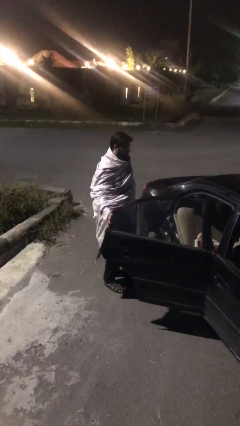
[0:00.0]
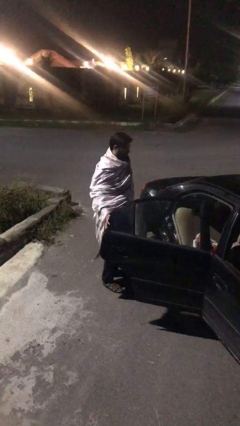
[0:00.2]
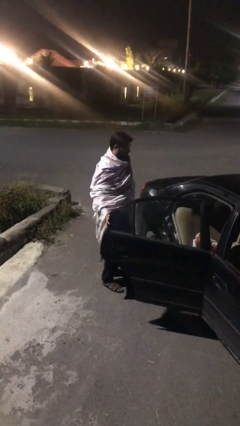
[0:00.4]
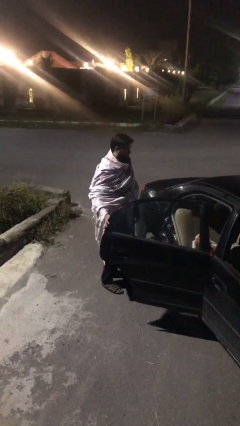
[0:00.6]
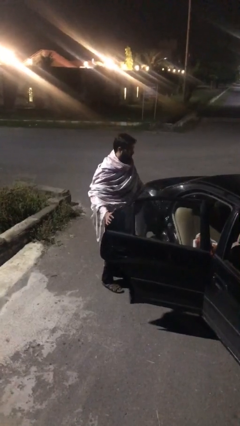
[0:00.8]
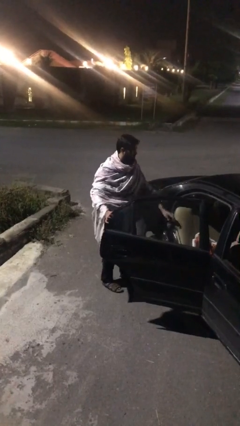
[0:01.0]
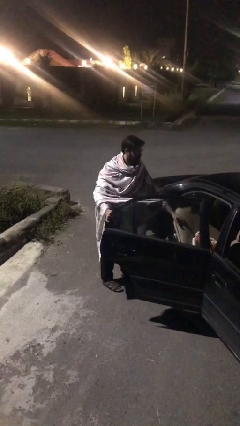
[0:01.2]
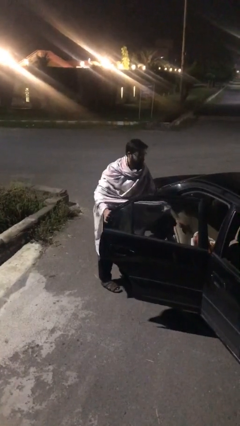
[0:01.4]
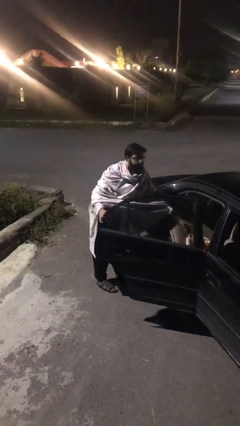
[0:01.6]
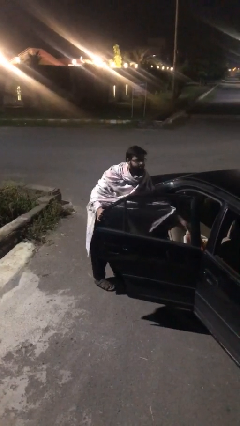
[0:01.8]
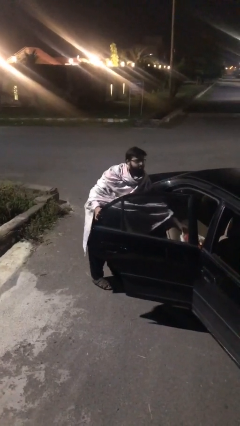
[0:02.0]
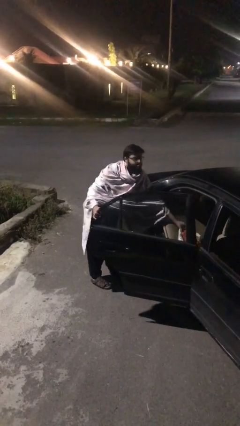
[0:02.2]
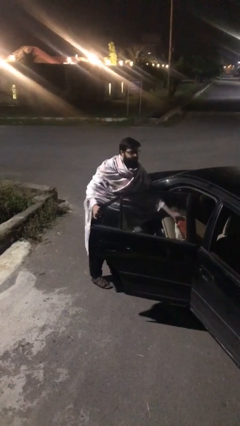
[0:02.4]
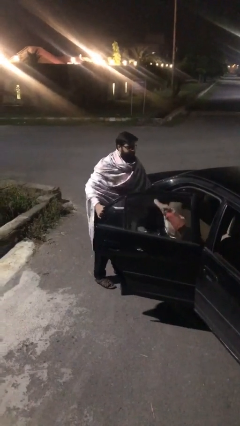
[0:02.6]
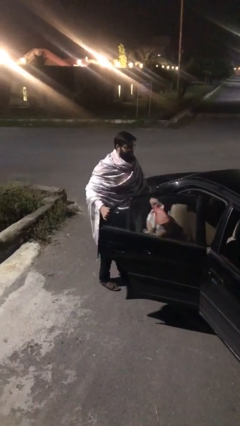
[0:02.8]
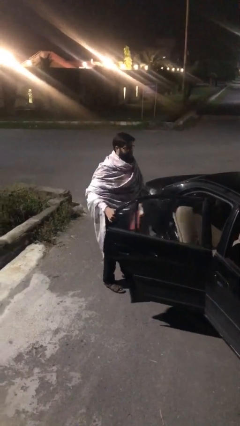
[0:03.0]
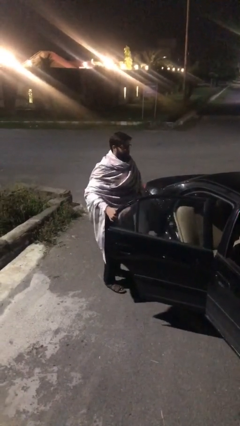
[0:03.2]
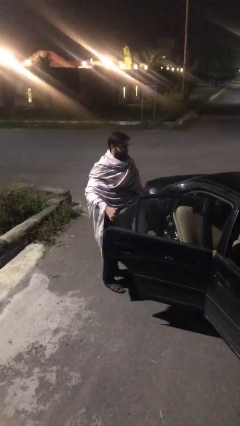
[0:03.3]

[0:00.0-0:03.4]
person unloads car

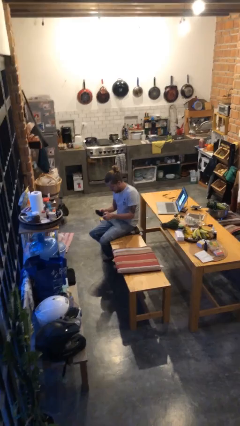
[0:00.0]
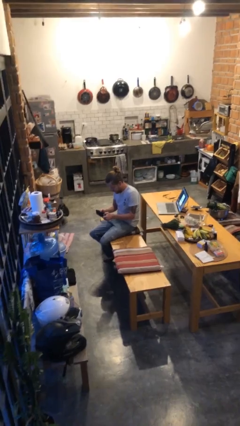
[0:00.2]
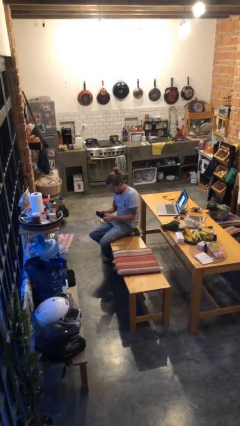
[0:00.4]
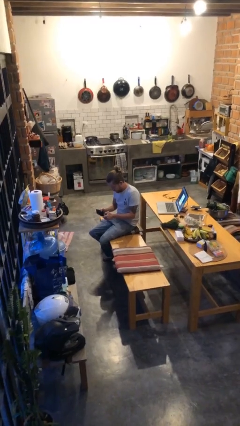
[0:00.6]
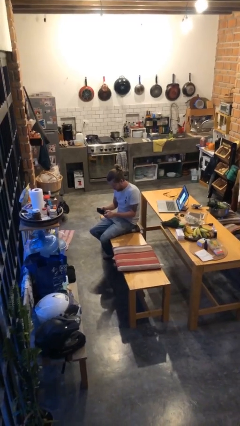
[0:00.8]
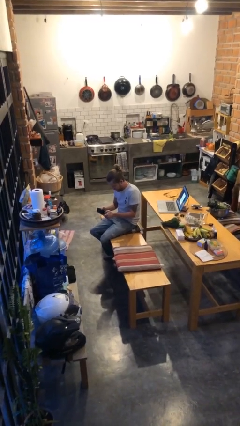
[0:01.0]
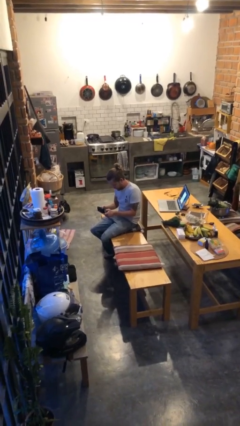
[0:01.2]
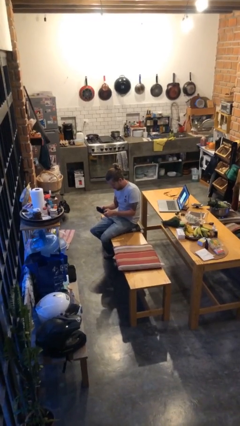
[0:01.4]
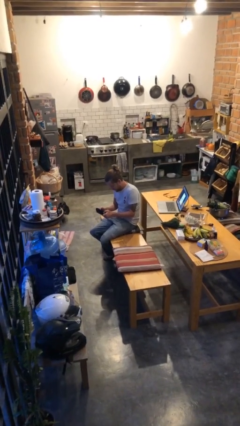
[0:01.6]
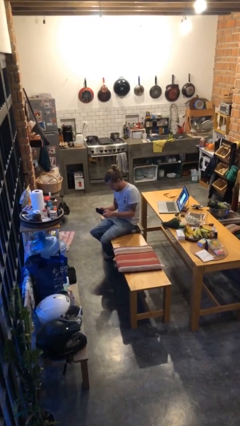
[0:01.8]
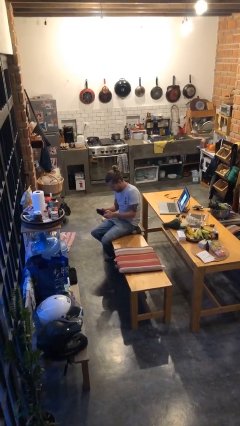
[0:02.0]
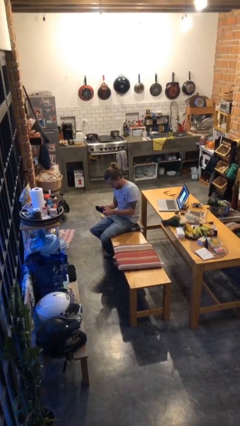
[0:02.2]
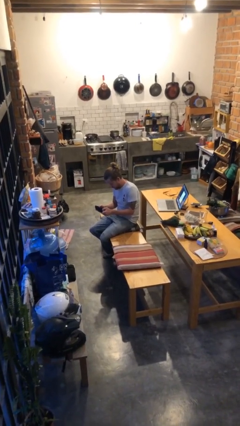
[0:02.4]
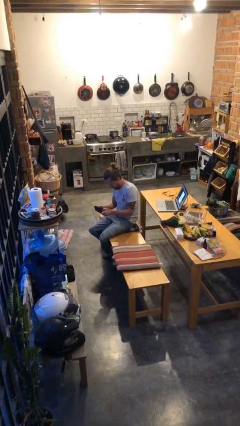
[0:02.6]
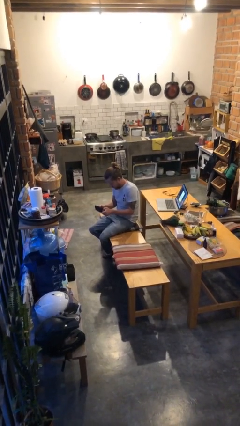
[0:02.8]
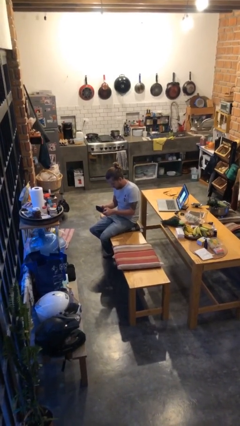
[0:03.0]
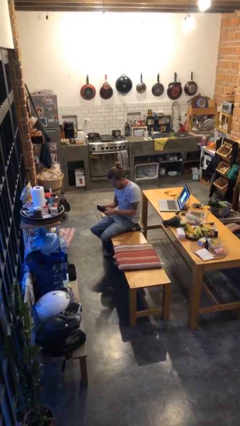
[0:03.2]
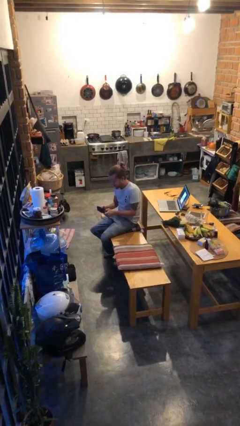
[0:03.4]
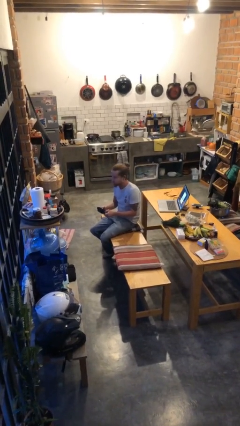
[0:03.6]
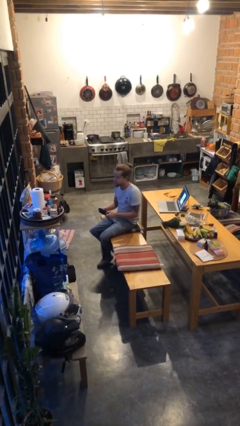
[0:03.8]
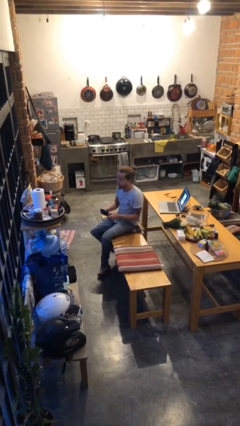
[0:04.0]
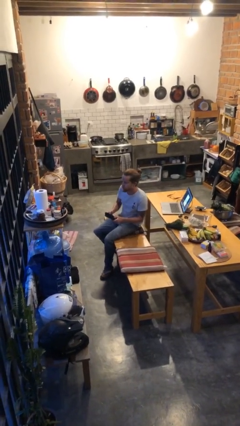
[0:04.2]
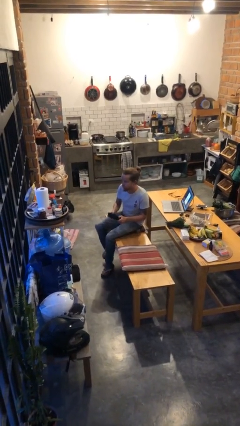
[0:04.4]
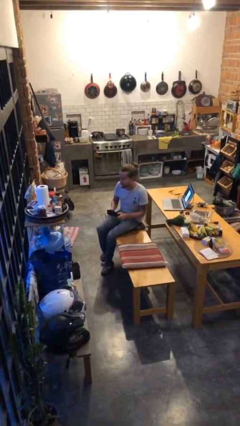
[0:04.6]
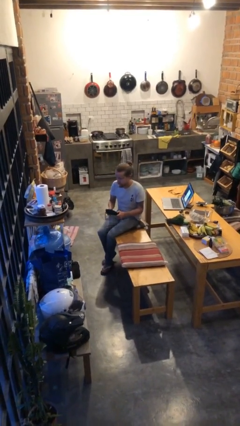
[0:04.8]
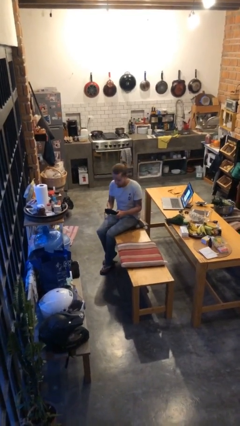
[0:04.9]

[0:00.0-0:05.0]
person interacts with handheld game

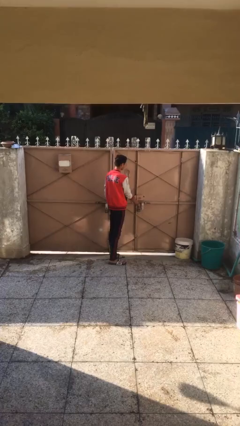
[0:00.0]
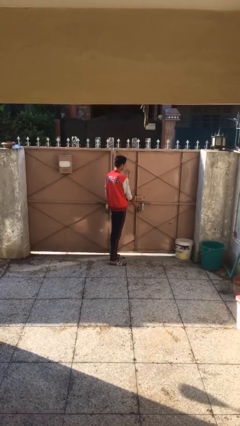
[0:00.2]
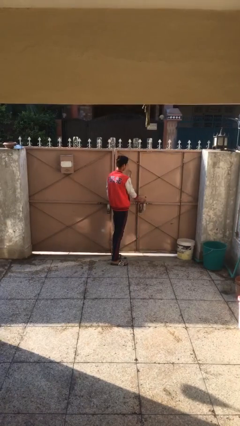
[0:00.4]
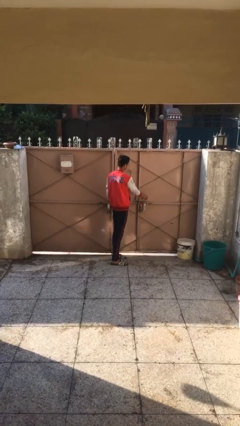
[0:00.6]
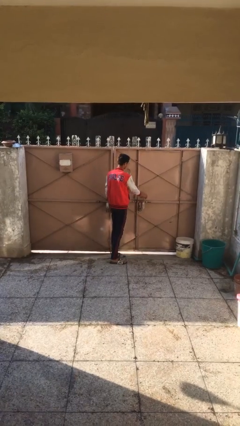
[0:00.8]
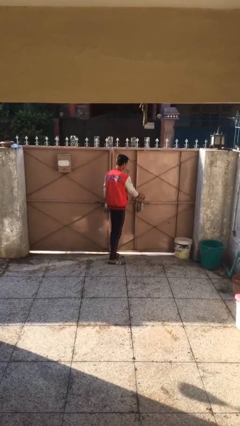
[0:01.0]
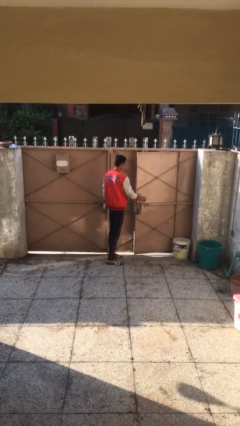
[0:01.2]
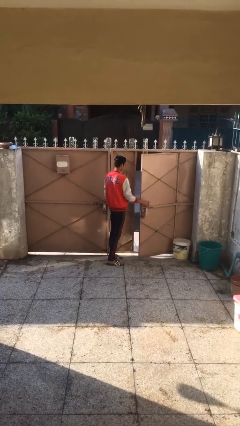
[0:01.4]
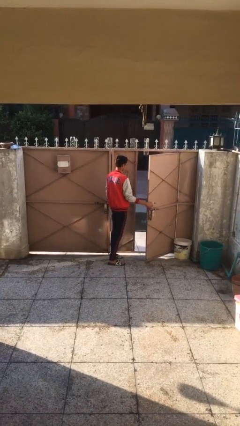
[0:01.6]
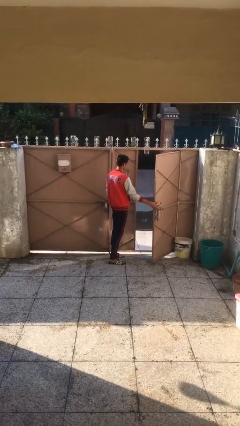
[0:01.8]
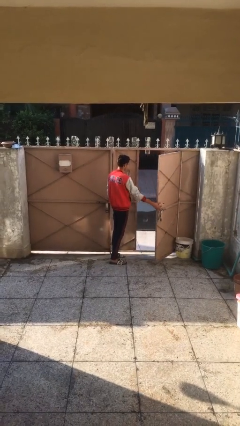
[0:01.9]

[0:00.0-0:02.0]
person opens facility door

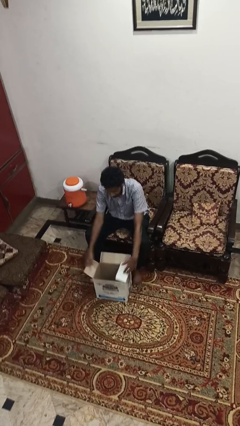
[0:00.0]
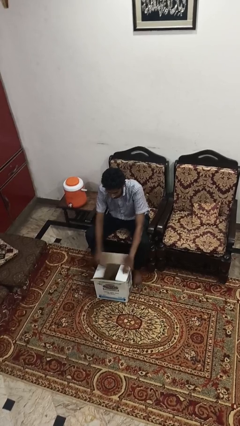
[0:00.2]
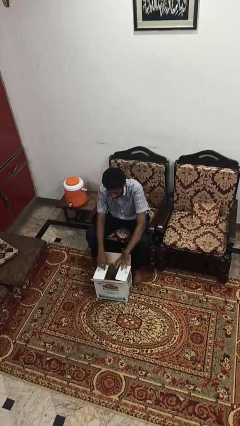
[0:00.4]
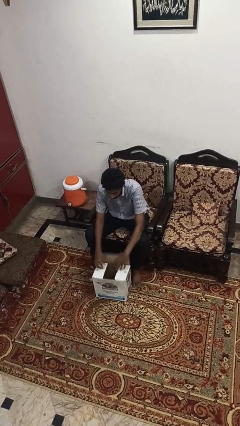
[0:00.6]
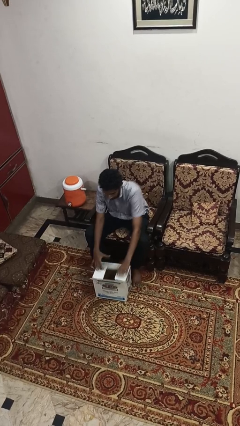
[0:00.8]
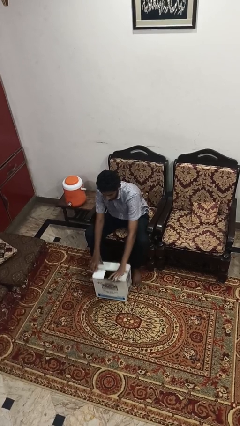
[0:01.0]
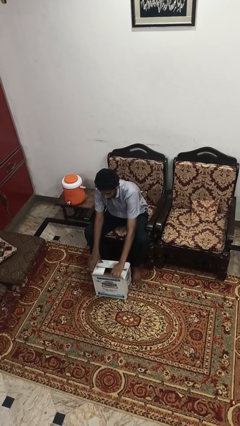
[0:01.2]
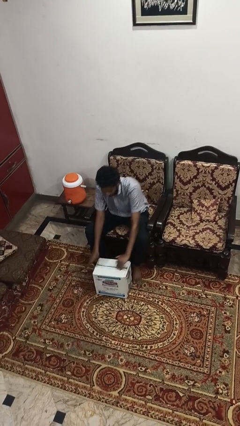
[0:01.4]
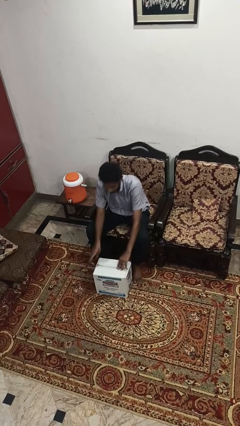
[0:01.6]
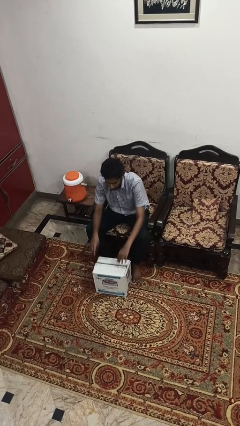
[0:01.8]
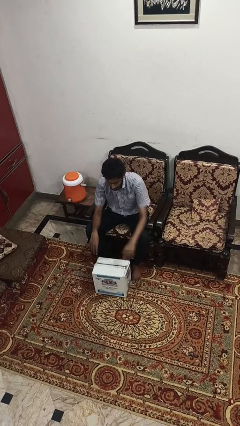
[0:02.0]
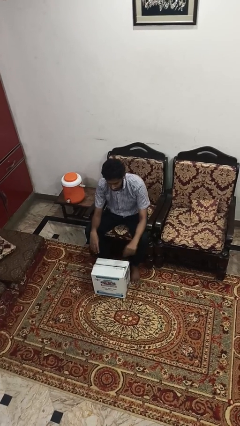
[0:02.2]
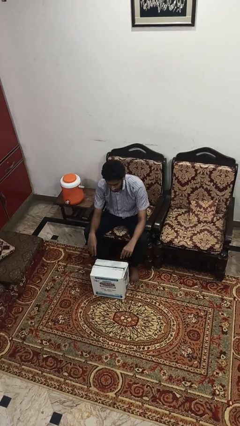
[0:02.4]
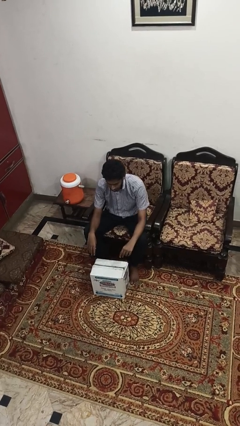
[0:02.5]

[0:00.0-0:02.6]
person closes box

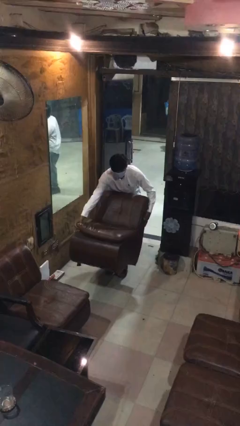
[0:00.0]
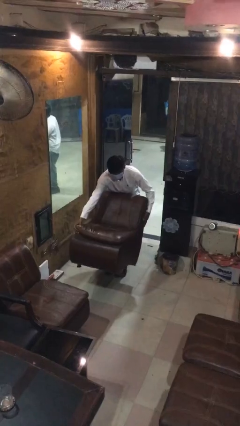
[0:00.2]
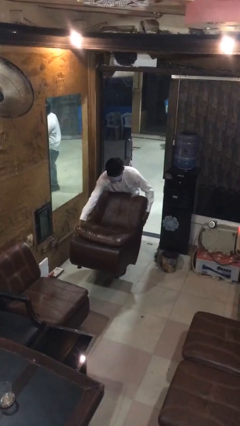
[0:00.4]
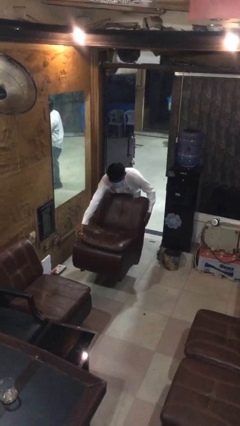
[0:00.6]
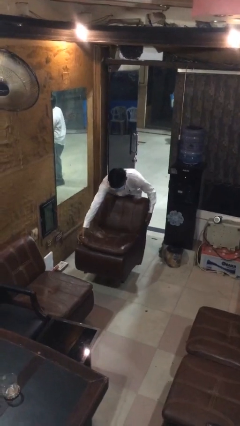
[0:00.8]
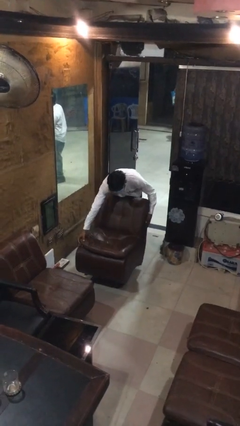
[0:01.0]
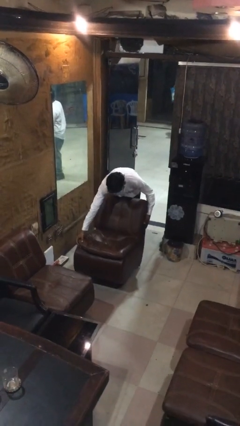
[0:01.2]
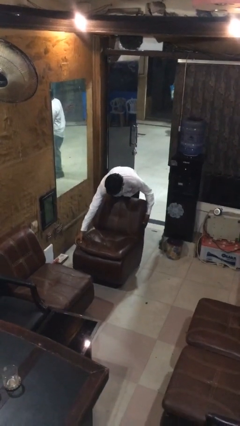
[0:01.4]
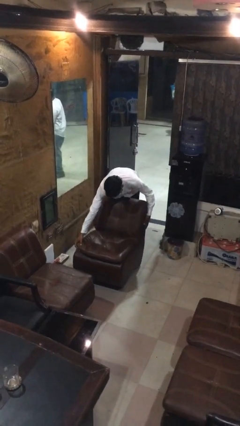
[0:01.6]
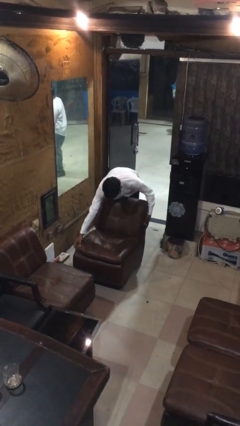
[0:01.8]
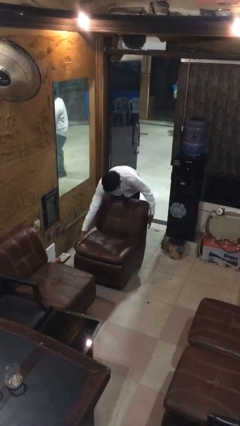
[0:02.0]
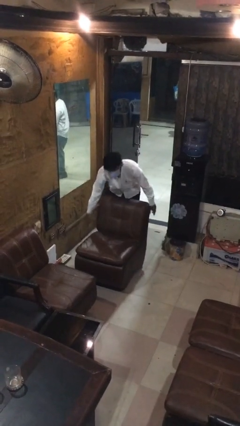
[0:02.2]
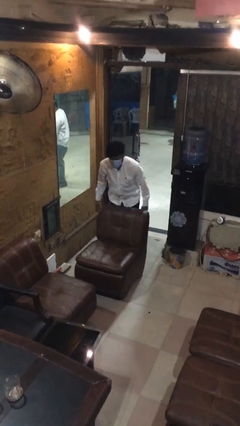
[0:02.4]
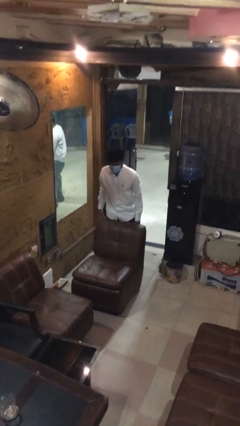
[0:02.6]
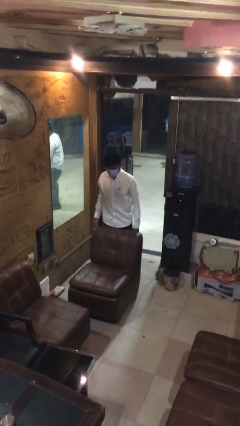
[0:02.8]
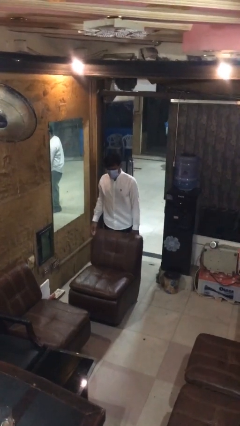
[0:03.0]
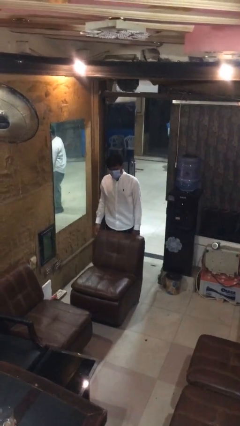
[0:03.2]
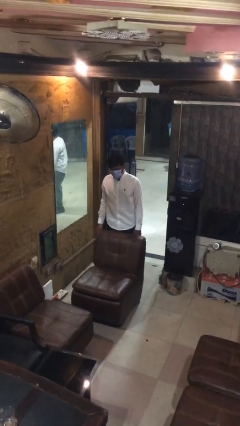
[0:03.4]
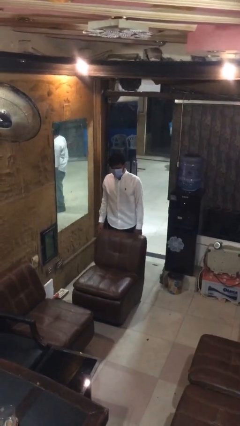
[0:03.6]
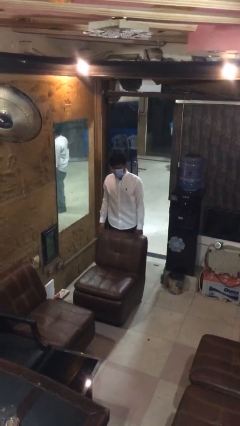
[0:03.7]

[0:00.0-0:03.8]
person puts down object on floor

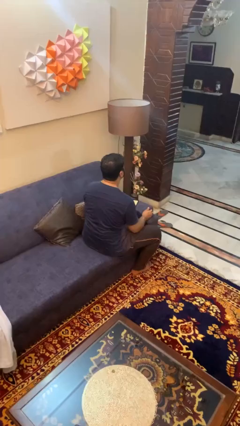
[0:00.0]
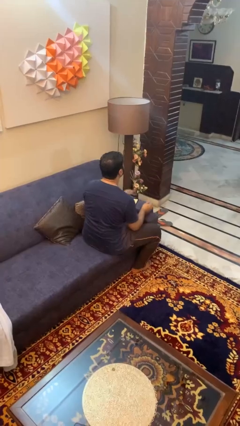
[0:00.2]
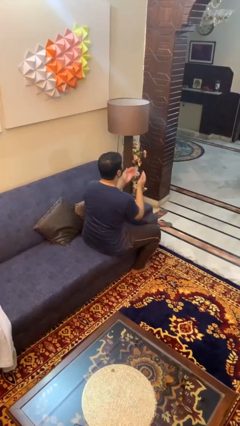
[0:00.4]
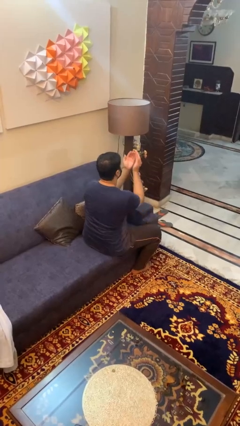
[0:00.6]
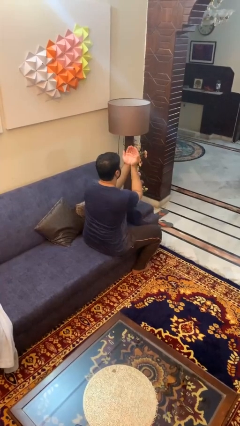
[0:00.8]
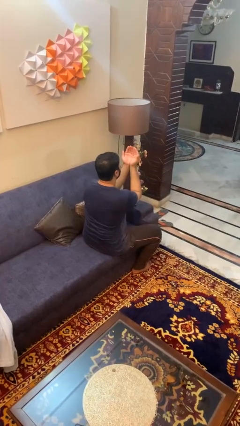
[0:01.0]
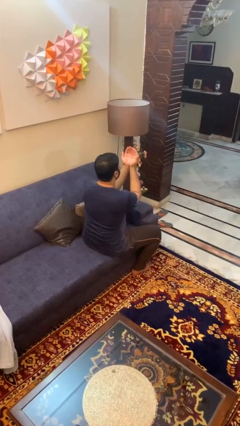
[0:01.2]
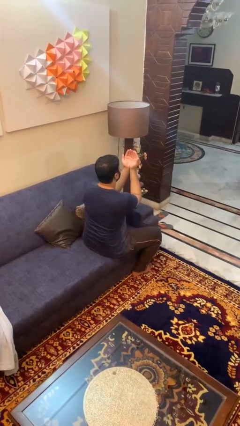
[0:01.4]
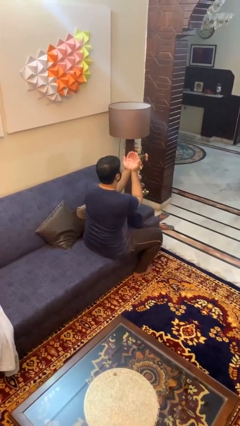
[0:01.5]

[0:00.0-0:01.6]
person prays
